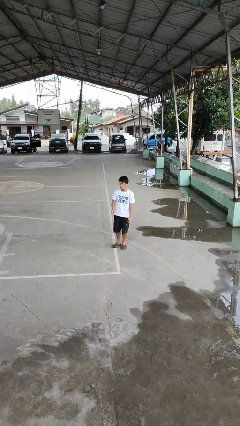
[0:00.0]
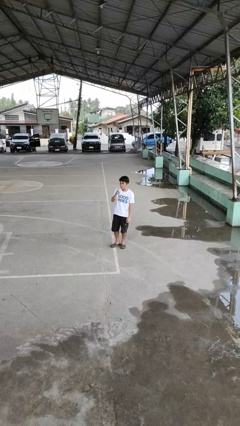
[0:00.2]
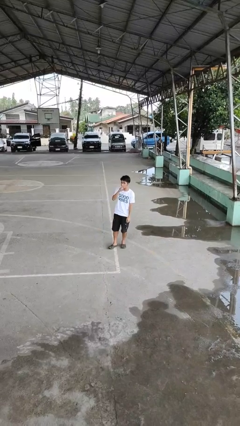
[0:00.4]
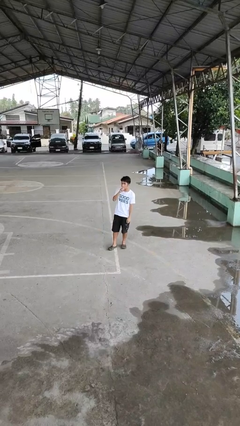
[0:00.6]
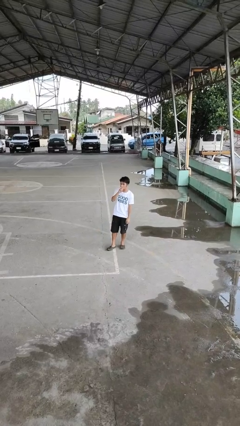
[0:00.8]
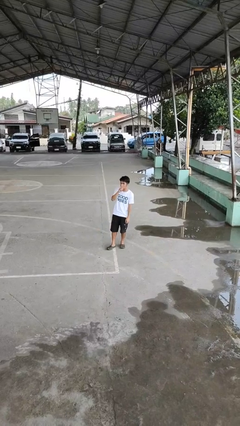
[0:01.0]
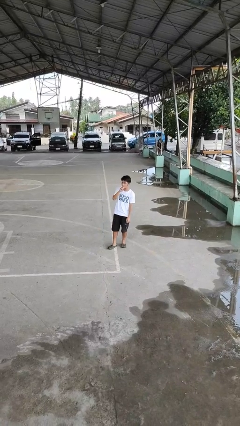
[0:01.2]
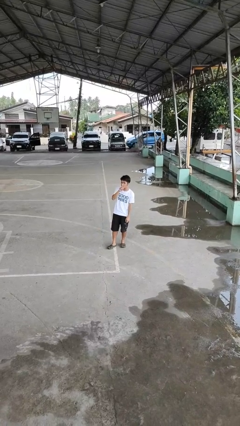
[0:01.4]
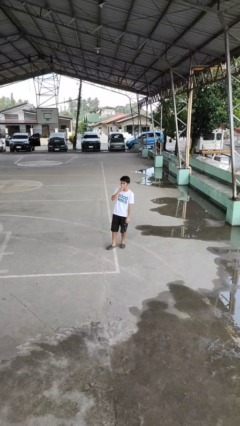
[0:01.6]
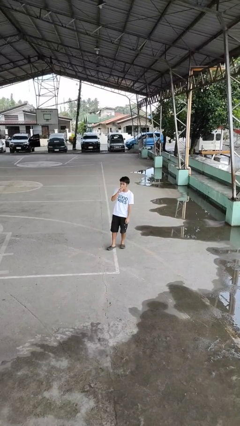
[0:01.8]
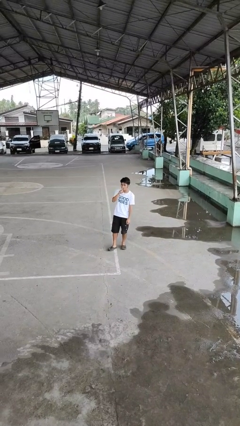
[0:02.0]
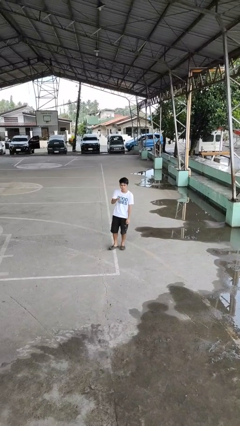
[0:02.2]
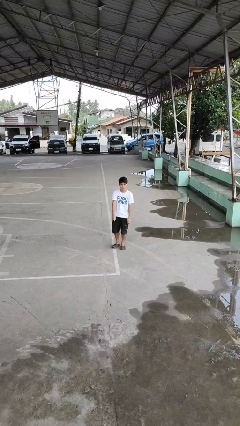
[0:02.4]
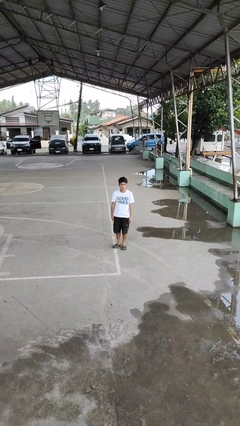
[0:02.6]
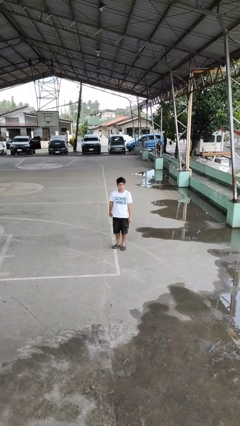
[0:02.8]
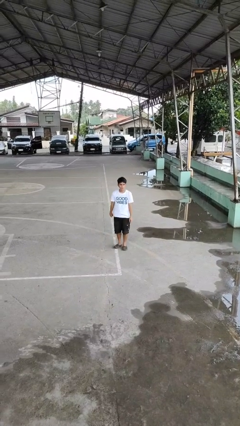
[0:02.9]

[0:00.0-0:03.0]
person gestures be quiet

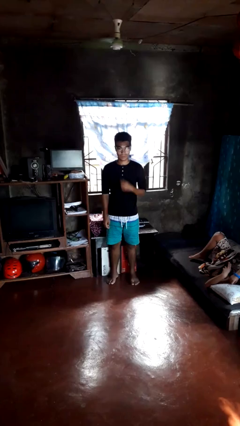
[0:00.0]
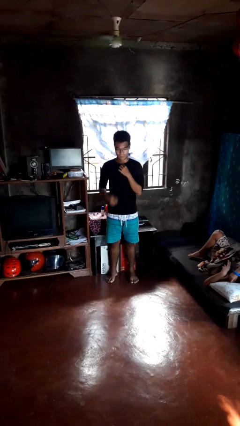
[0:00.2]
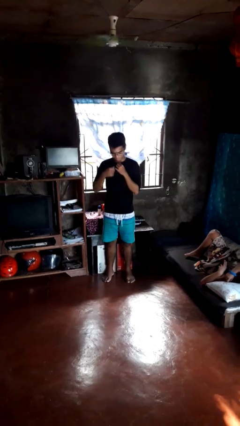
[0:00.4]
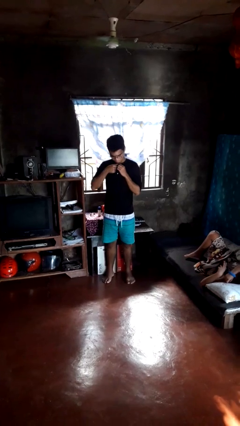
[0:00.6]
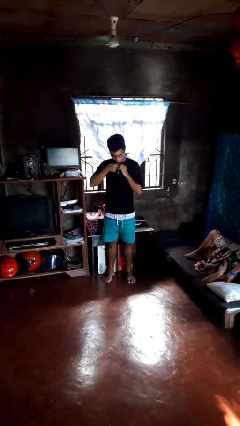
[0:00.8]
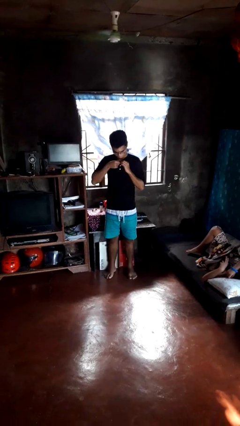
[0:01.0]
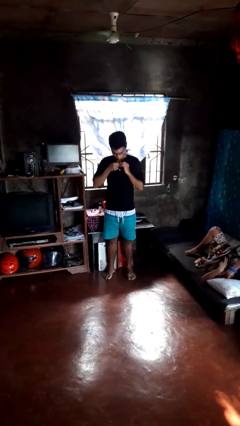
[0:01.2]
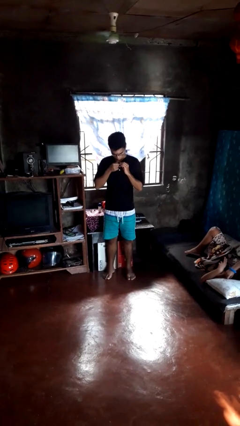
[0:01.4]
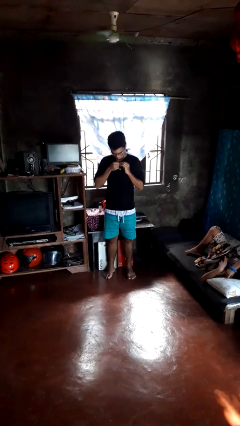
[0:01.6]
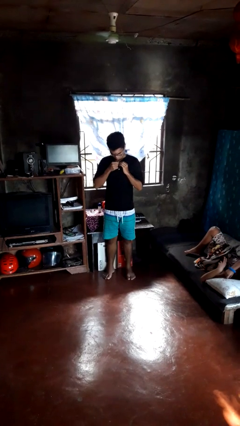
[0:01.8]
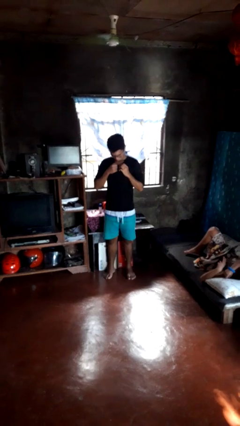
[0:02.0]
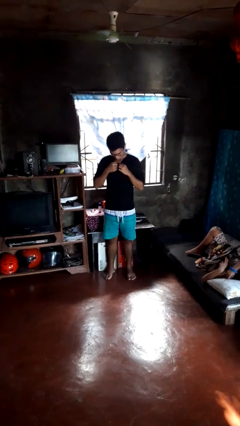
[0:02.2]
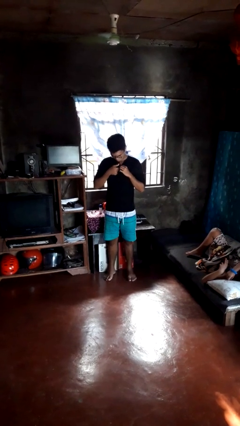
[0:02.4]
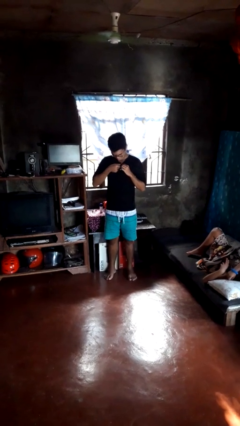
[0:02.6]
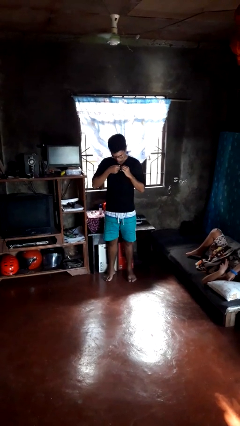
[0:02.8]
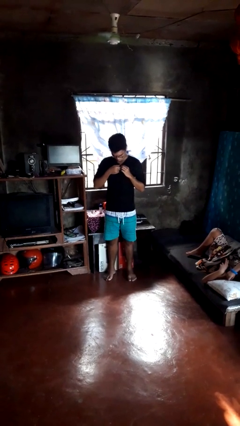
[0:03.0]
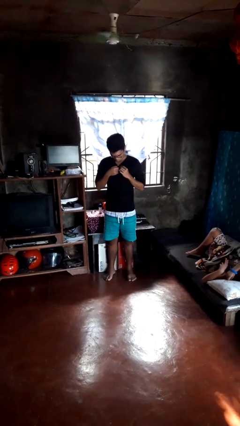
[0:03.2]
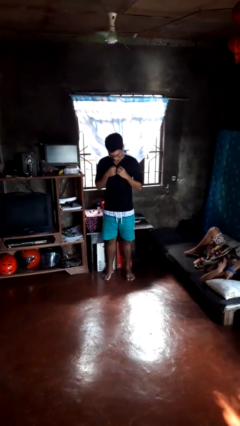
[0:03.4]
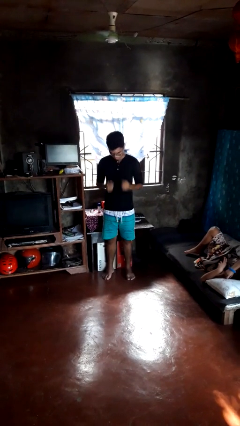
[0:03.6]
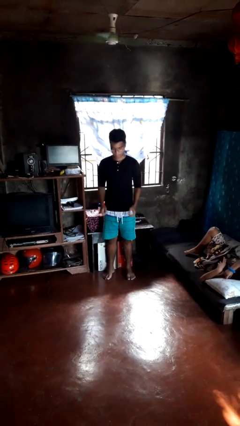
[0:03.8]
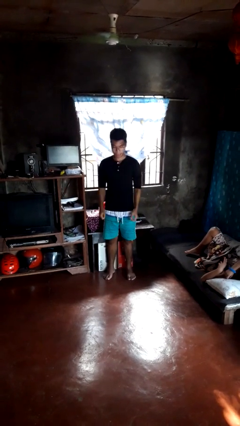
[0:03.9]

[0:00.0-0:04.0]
person unbuttons shirt

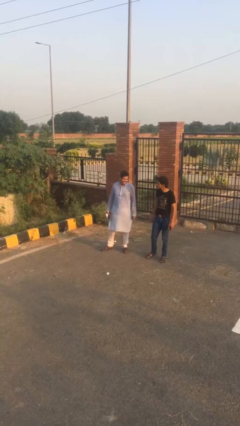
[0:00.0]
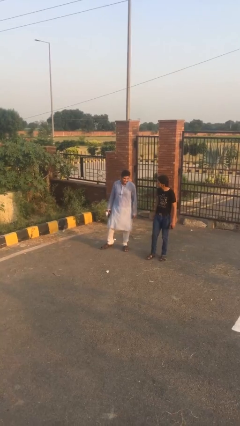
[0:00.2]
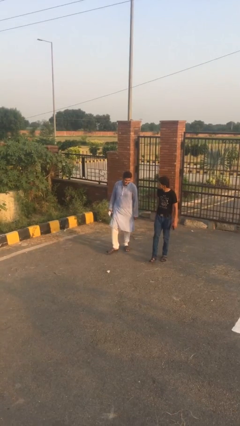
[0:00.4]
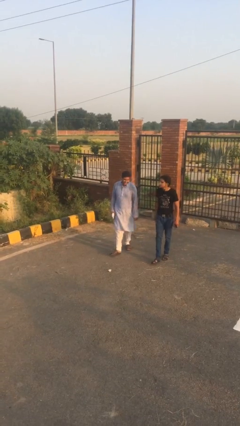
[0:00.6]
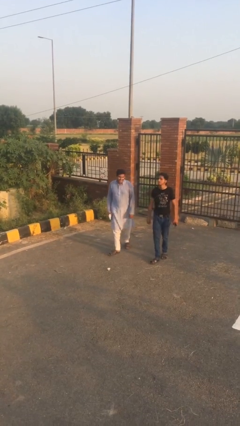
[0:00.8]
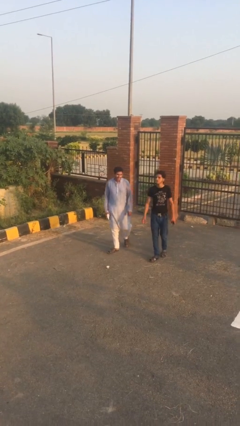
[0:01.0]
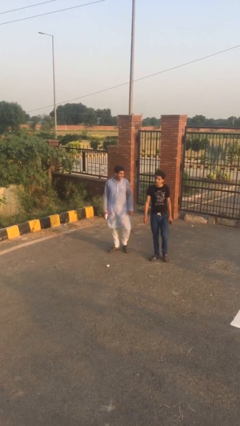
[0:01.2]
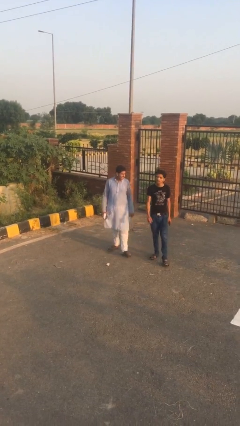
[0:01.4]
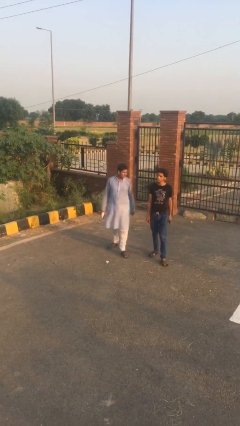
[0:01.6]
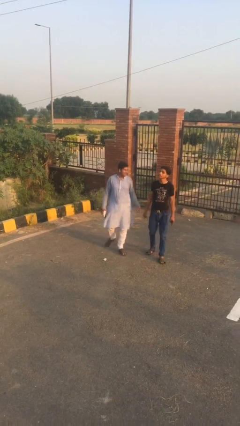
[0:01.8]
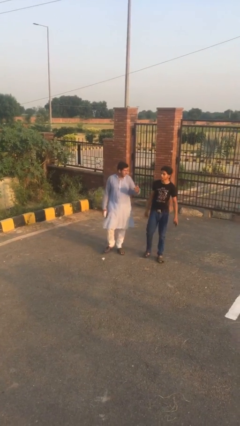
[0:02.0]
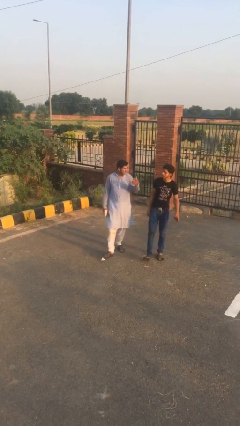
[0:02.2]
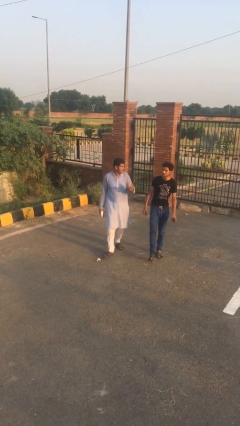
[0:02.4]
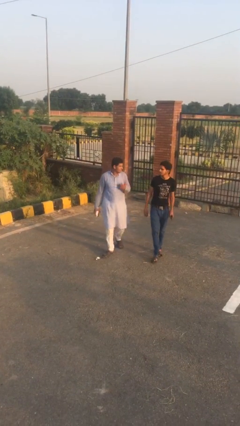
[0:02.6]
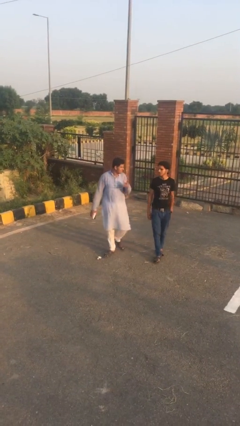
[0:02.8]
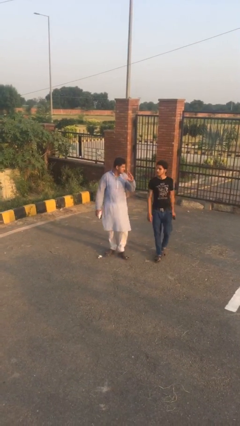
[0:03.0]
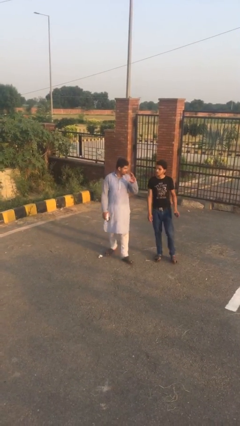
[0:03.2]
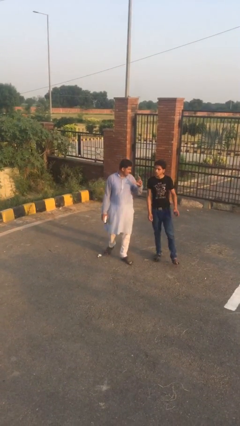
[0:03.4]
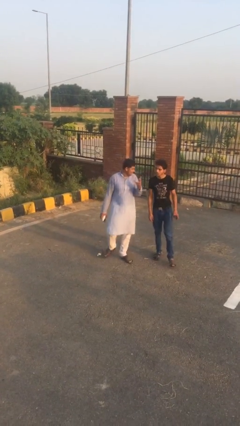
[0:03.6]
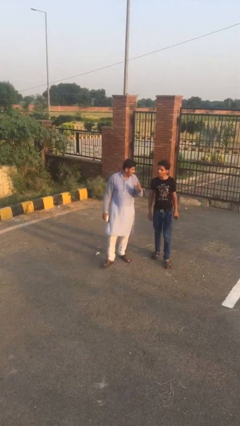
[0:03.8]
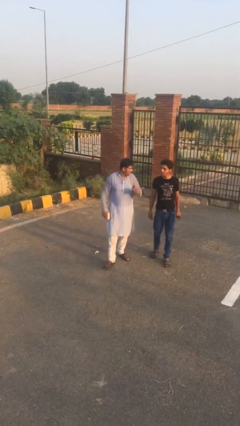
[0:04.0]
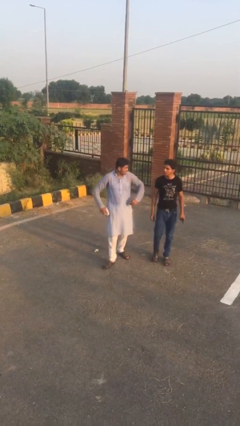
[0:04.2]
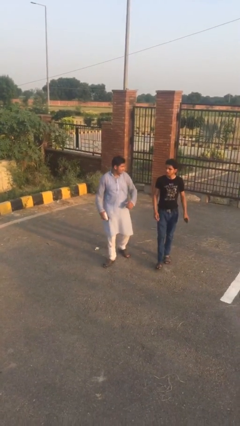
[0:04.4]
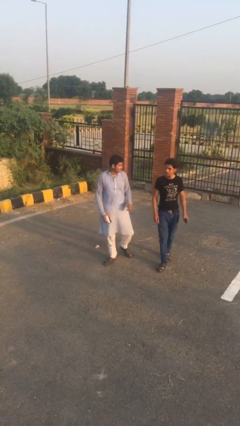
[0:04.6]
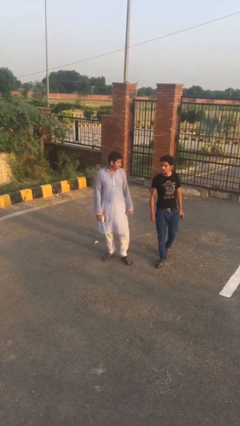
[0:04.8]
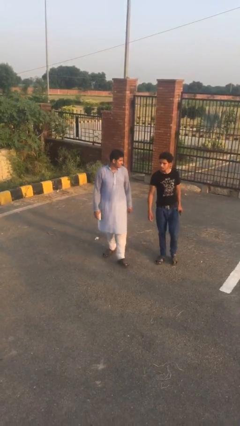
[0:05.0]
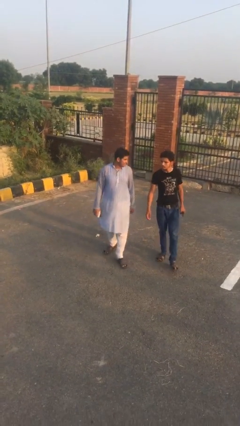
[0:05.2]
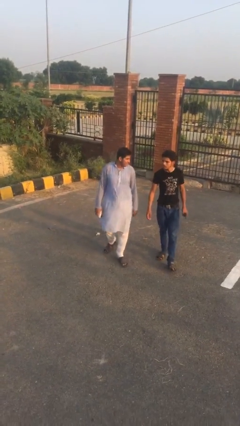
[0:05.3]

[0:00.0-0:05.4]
person talks to person

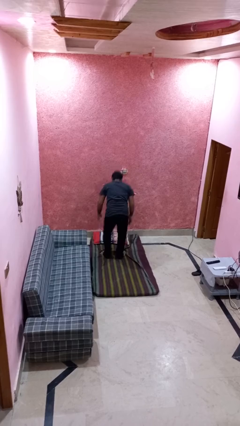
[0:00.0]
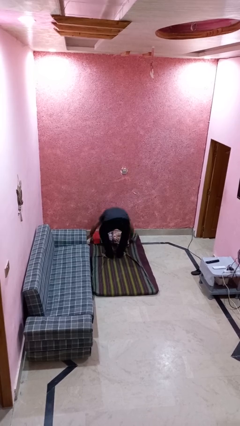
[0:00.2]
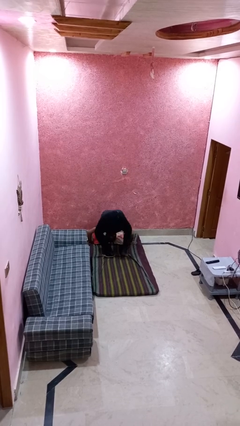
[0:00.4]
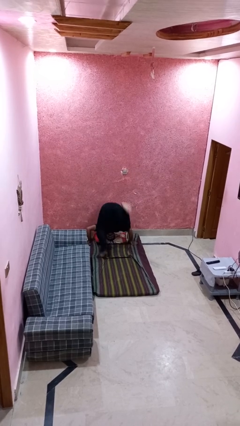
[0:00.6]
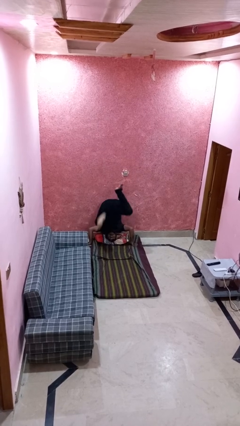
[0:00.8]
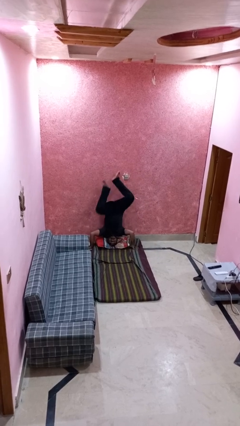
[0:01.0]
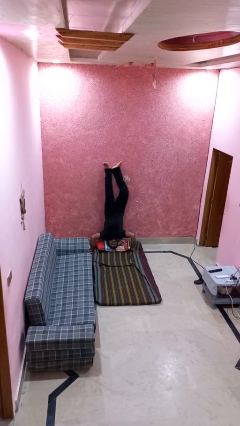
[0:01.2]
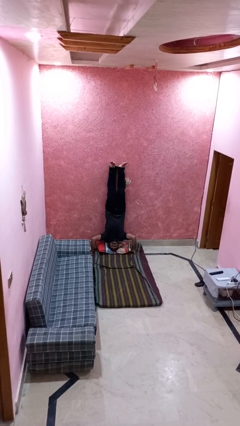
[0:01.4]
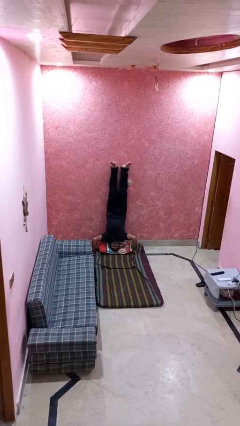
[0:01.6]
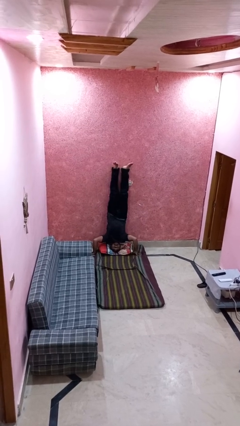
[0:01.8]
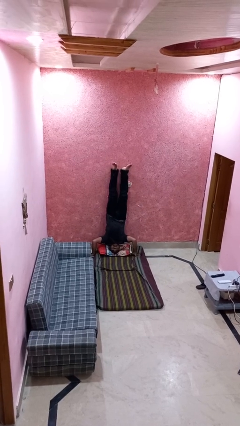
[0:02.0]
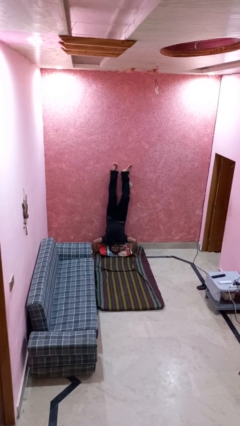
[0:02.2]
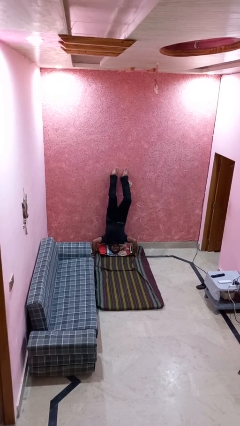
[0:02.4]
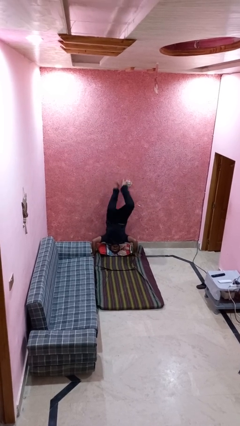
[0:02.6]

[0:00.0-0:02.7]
person handstand

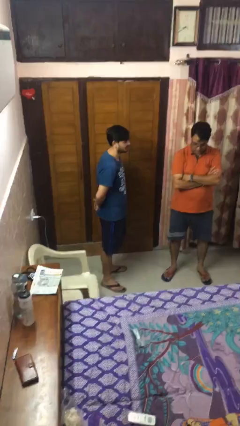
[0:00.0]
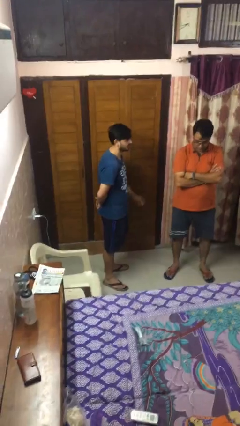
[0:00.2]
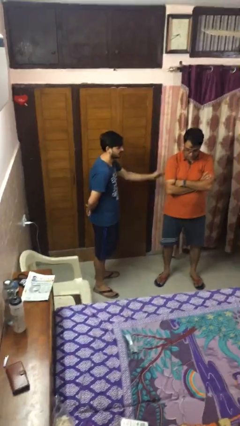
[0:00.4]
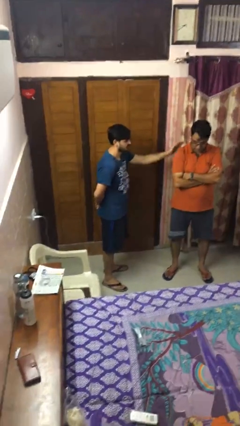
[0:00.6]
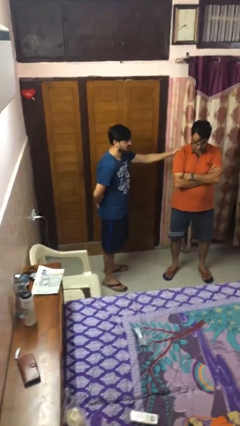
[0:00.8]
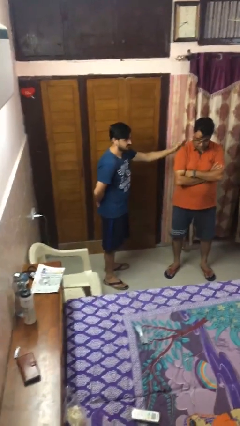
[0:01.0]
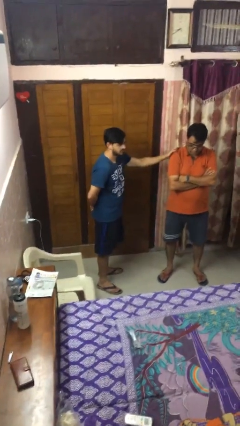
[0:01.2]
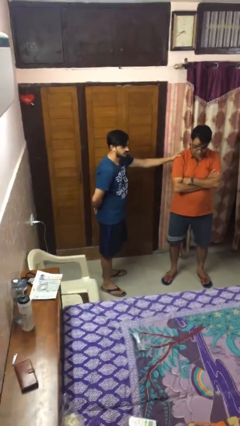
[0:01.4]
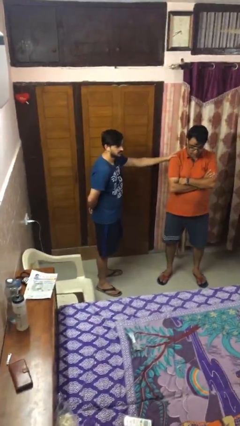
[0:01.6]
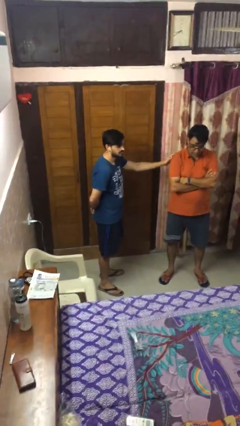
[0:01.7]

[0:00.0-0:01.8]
person pounds shoulders of person

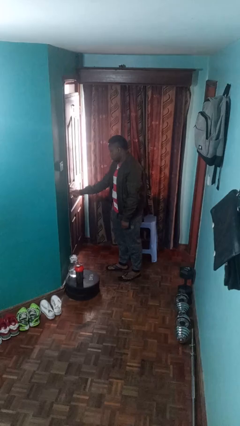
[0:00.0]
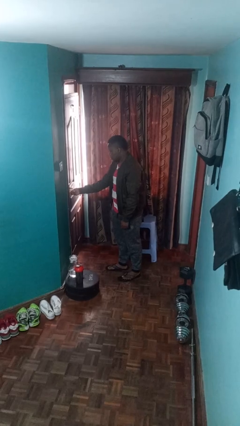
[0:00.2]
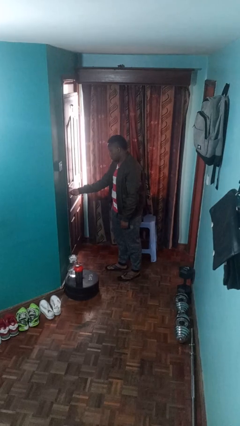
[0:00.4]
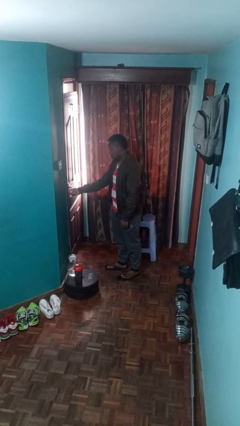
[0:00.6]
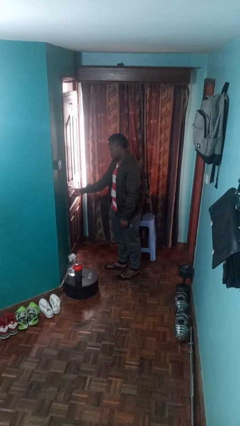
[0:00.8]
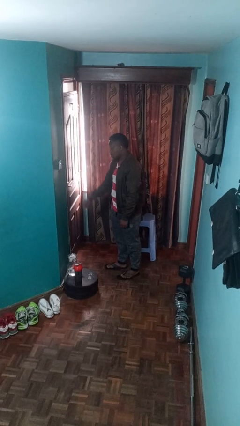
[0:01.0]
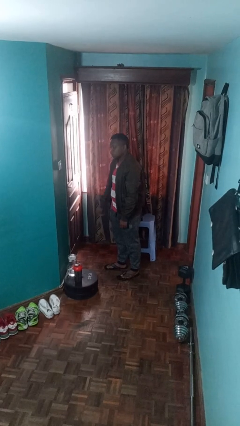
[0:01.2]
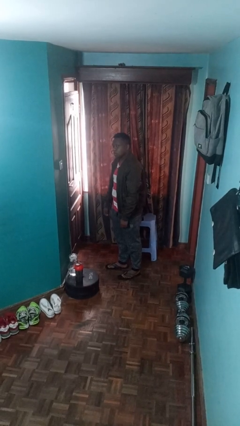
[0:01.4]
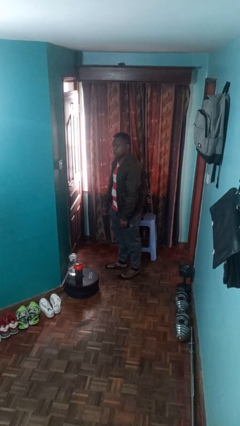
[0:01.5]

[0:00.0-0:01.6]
person locks door with keys
